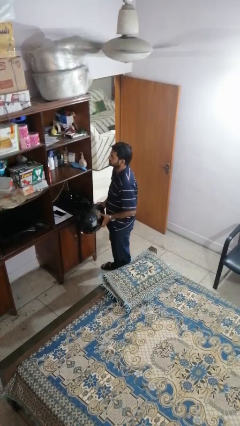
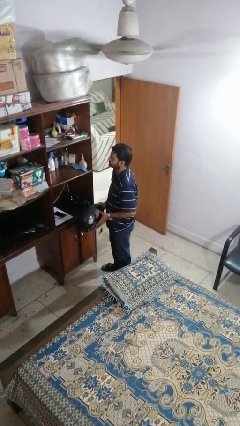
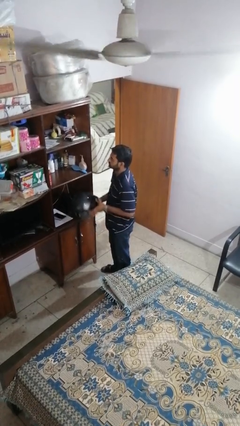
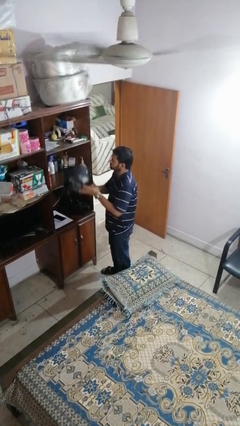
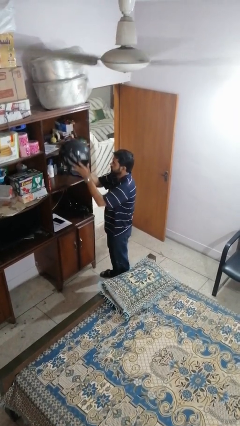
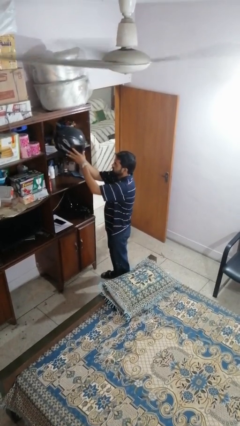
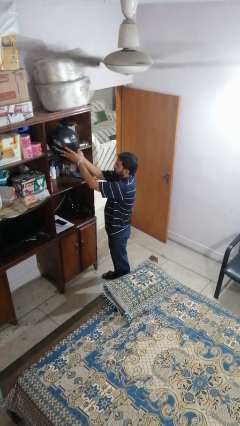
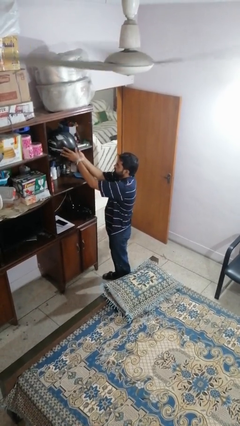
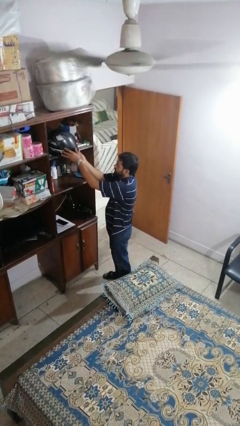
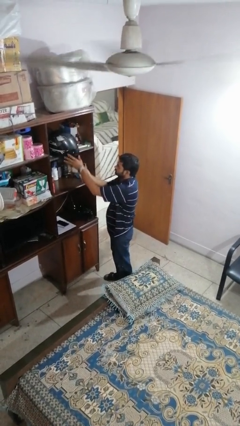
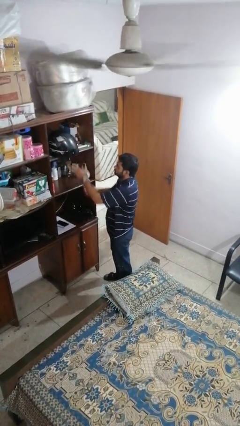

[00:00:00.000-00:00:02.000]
person puts down object on shelf

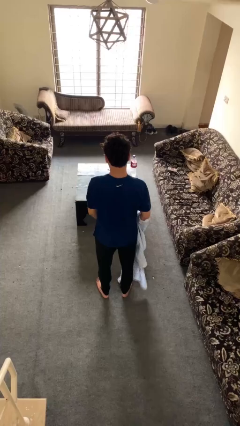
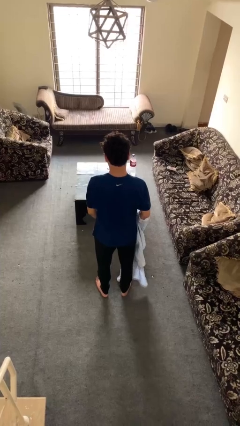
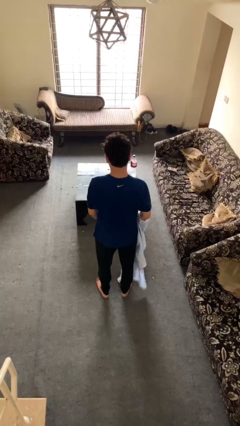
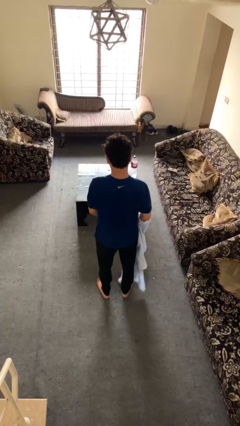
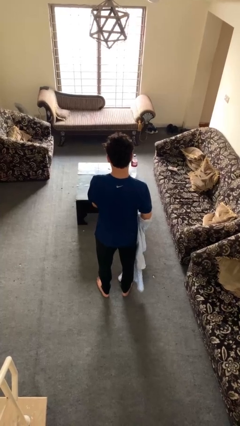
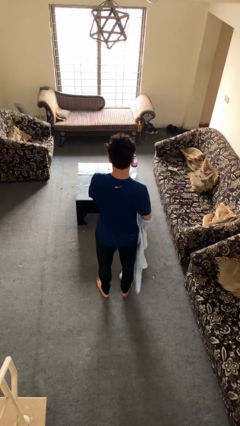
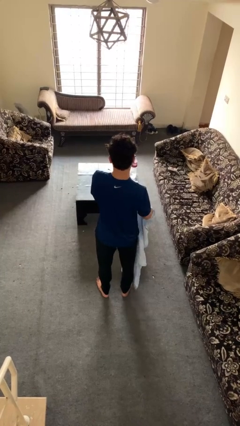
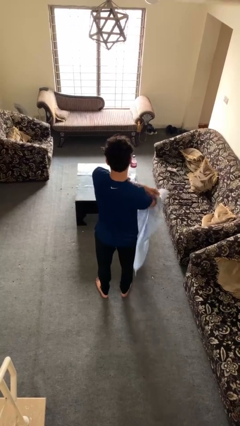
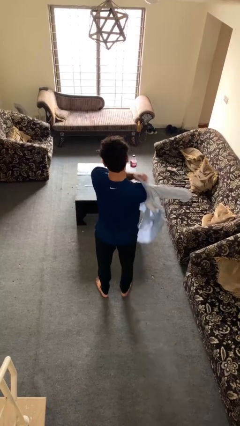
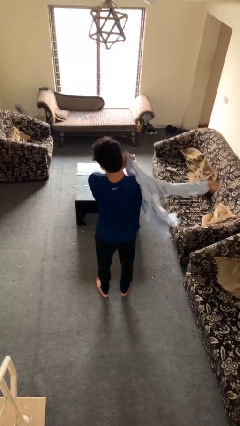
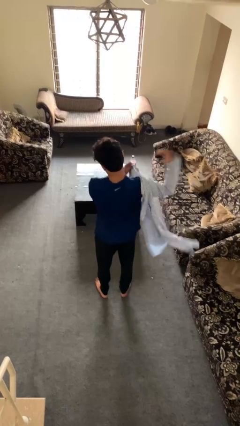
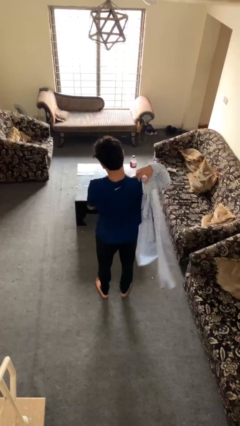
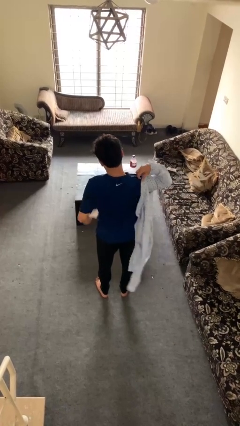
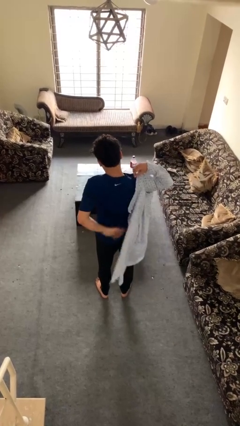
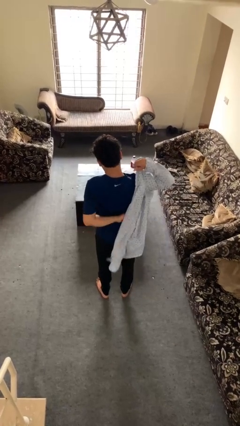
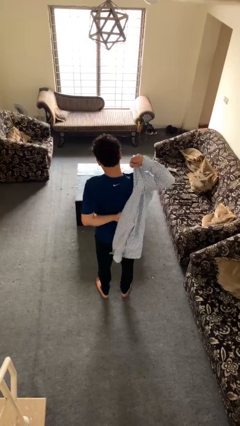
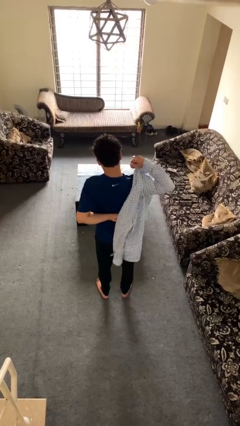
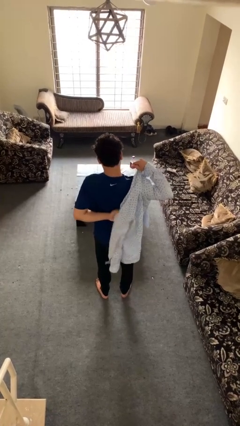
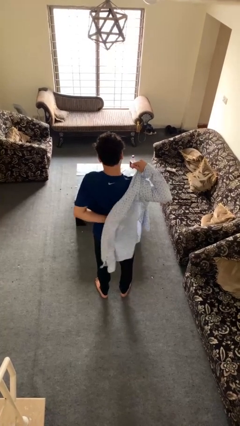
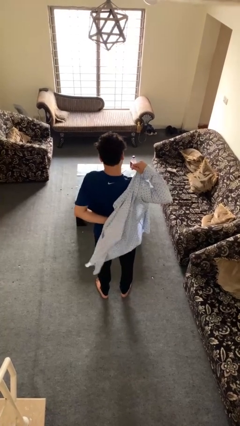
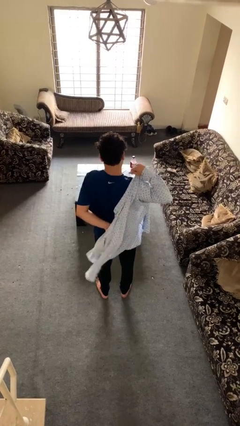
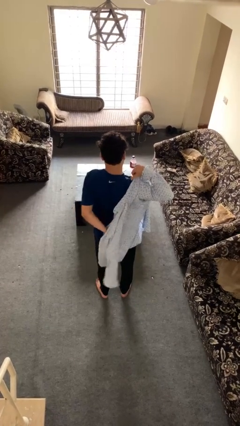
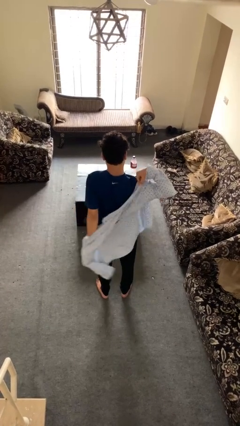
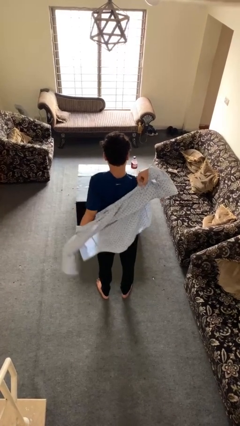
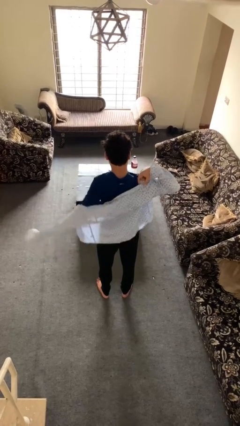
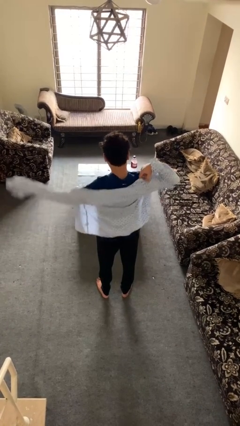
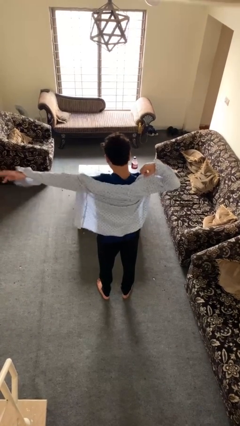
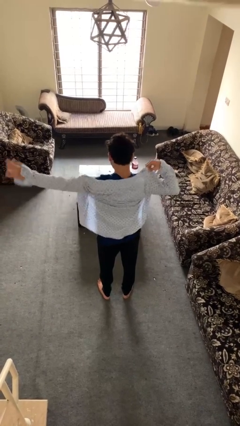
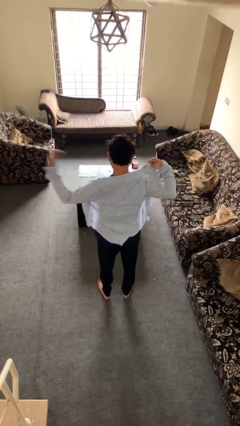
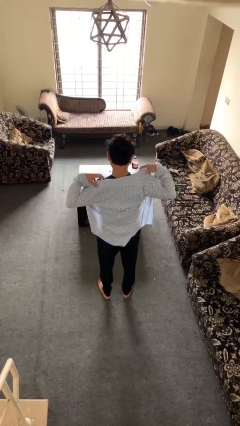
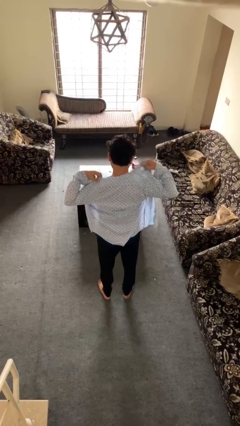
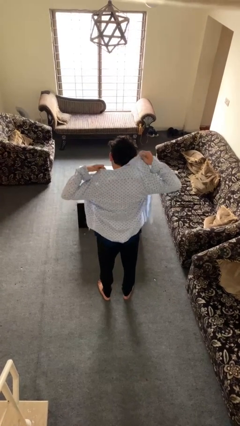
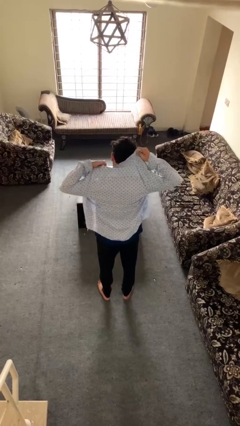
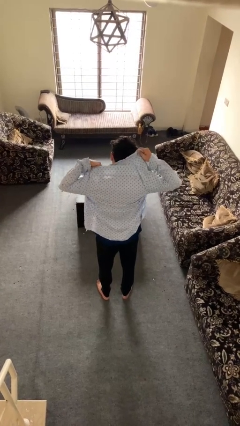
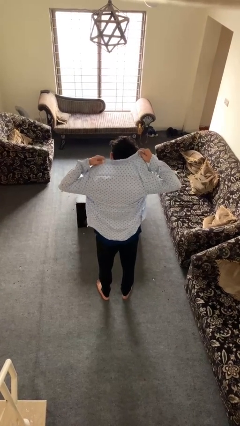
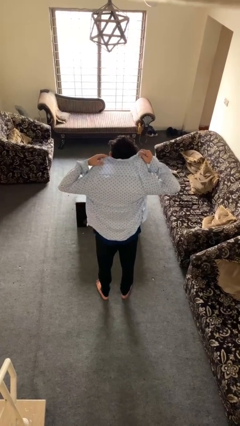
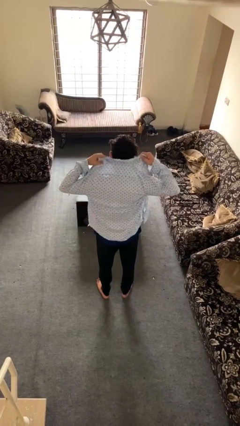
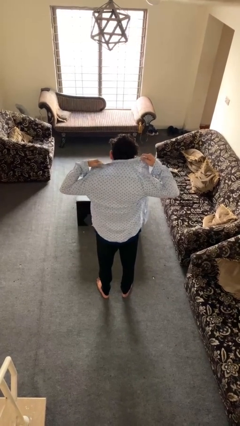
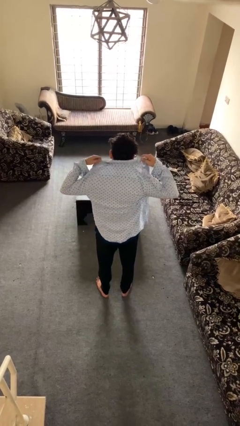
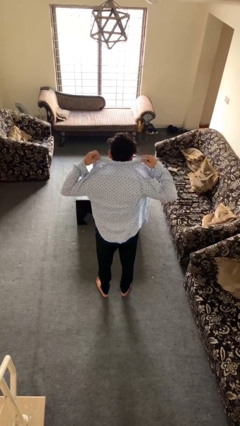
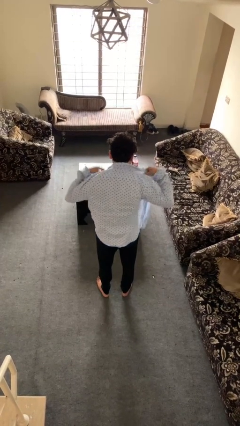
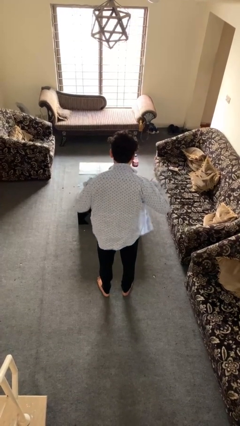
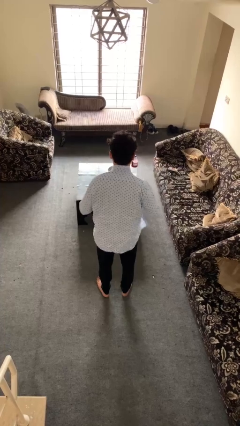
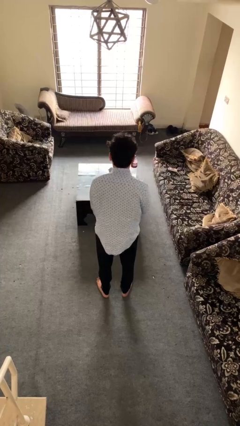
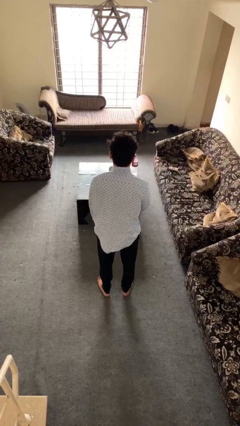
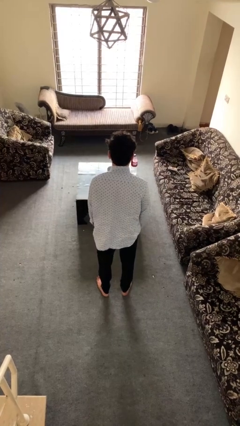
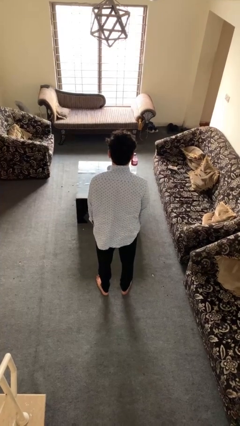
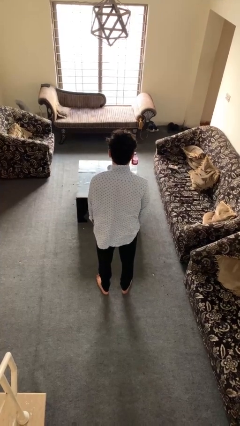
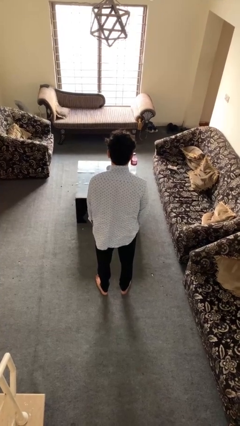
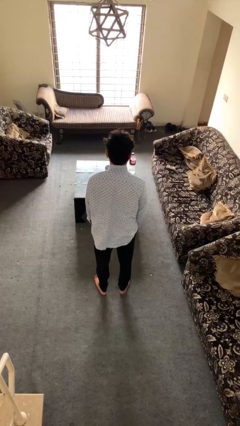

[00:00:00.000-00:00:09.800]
person puts on shirt

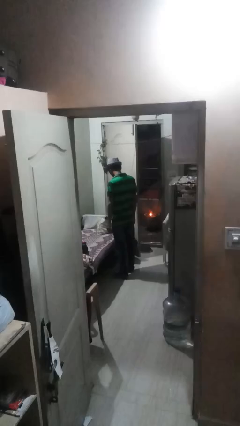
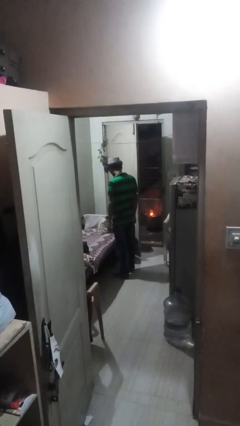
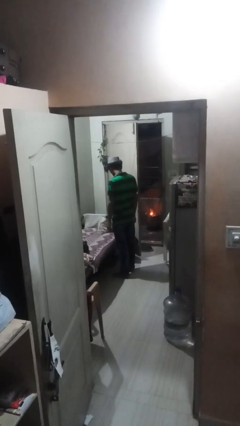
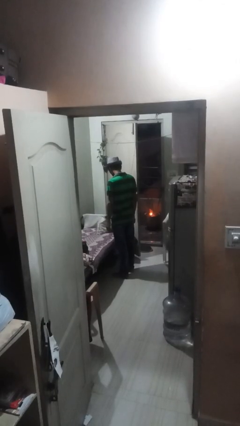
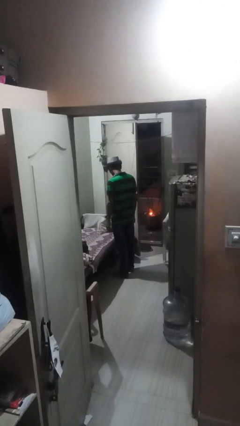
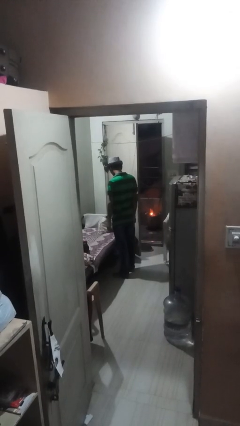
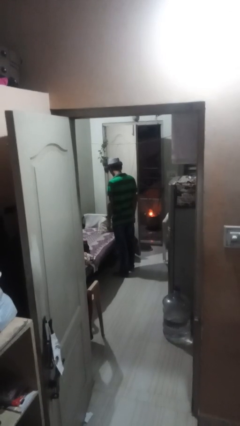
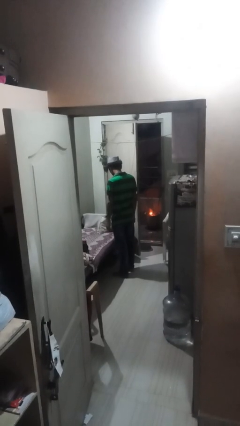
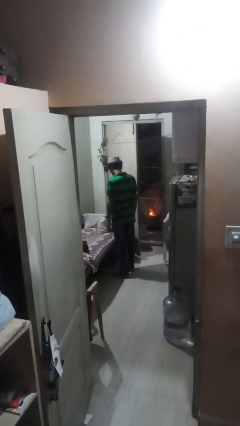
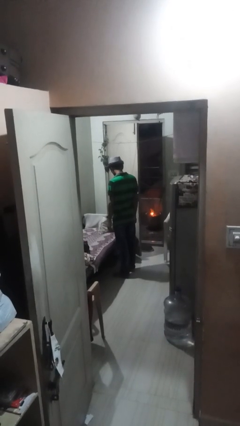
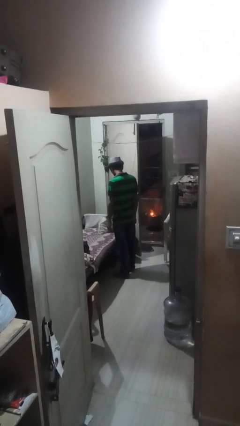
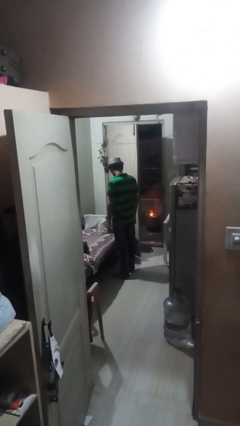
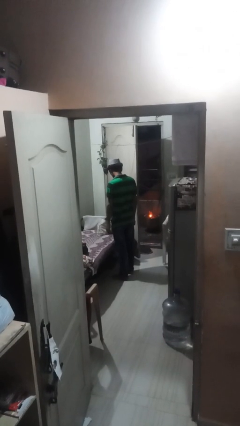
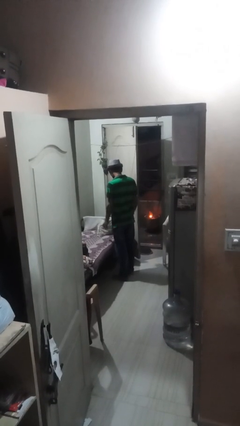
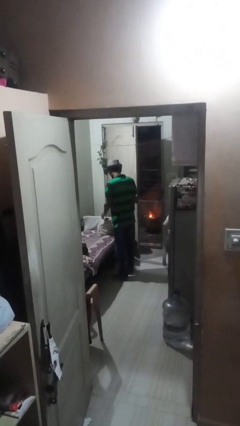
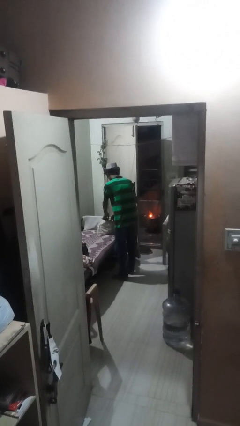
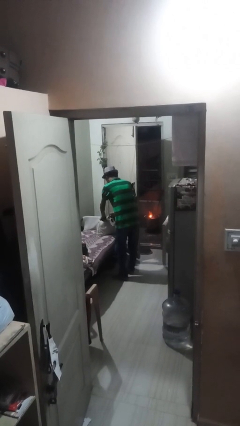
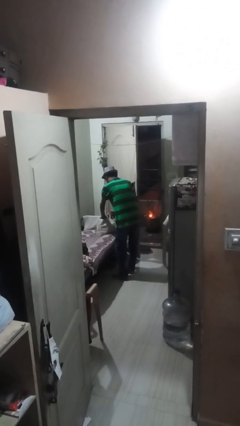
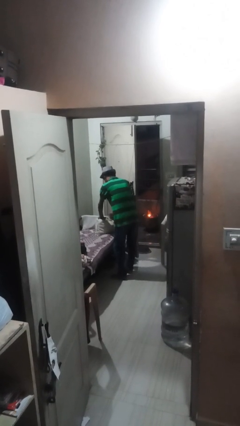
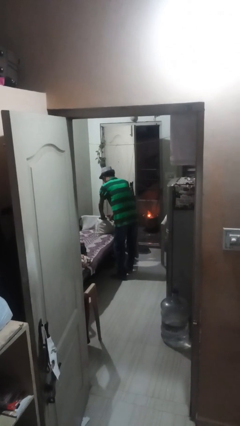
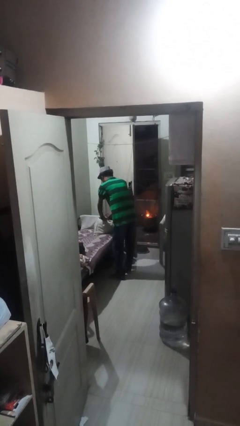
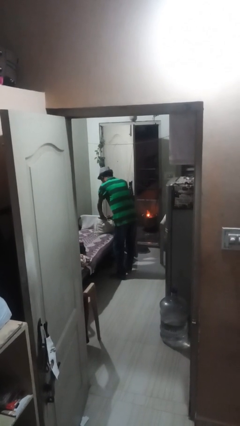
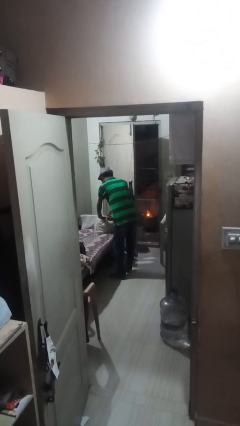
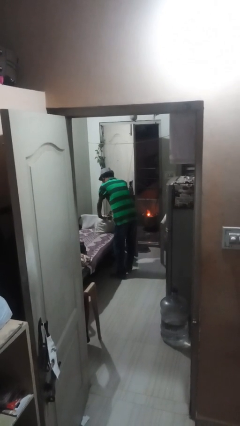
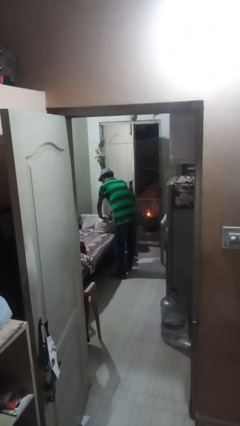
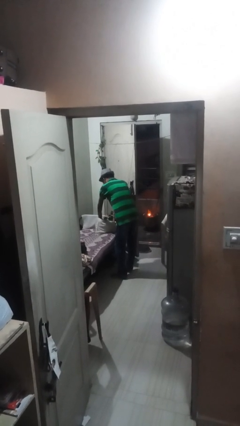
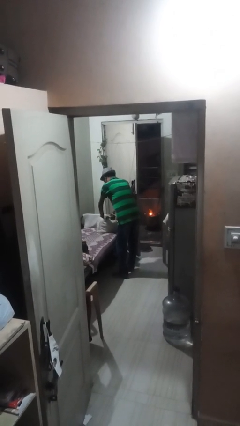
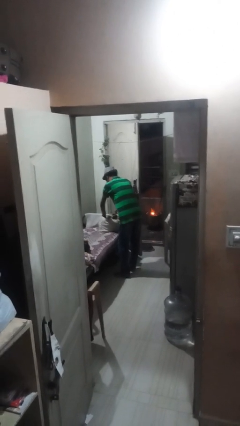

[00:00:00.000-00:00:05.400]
person searches in bag

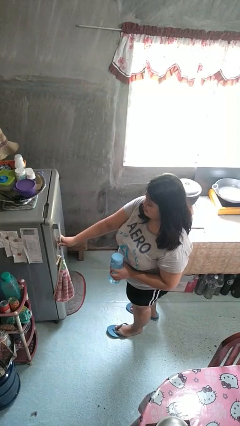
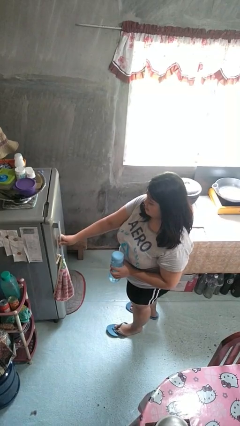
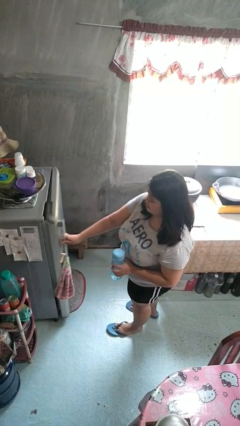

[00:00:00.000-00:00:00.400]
person opens refrigerator
